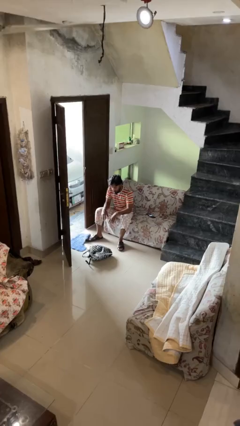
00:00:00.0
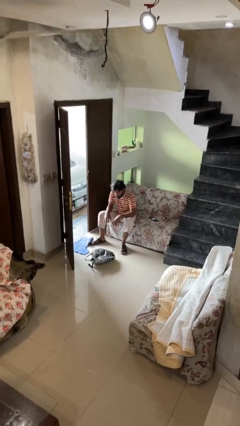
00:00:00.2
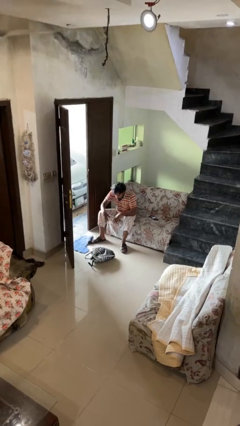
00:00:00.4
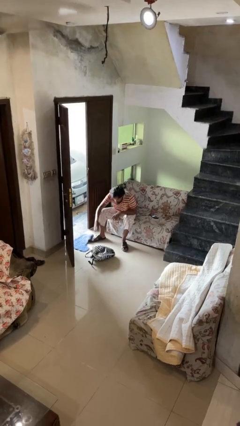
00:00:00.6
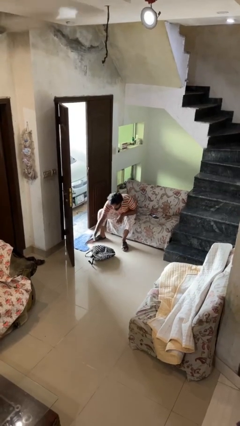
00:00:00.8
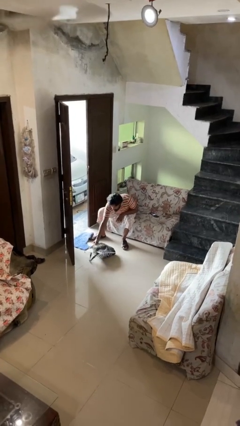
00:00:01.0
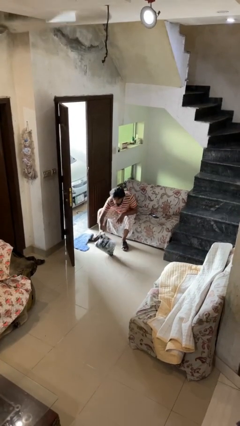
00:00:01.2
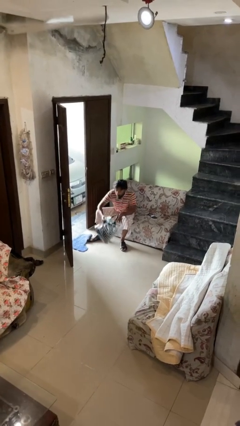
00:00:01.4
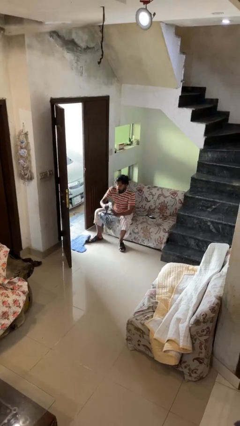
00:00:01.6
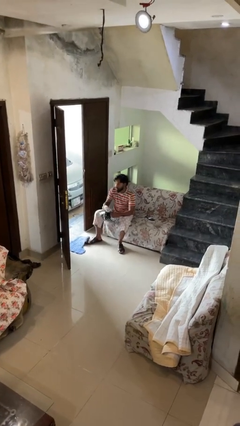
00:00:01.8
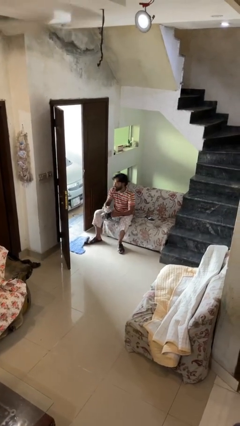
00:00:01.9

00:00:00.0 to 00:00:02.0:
person picks up object from floor

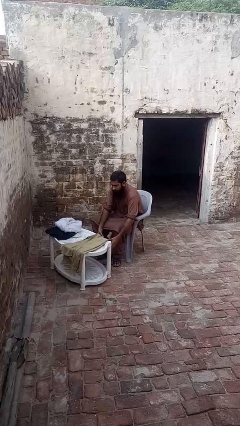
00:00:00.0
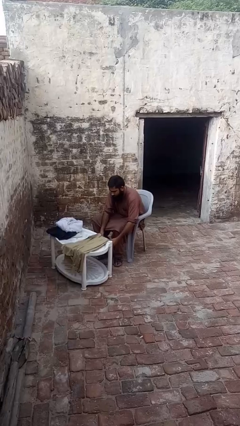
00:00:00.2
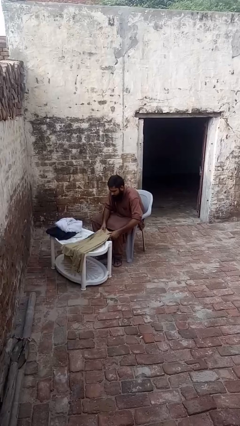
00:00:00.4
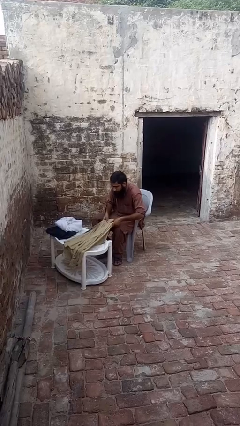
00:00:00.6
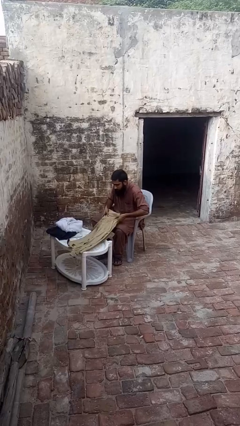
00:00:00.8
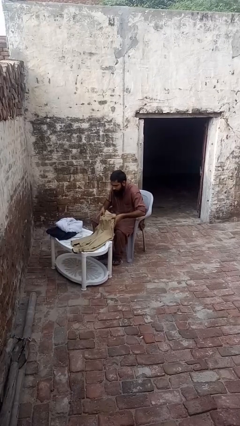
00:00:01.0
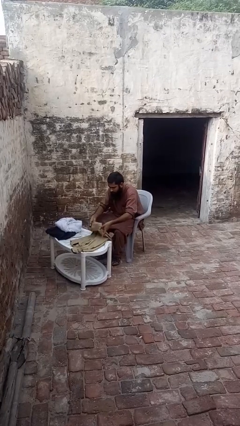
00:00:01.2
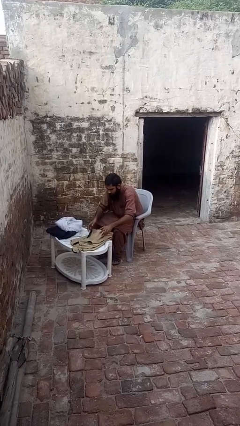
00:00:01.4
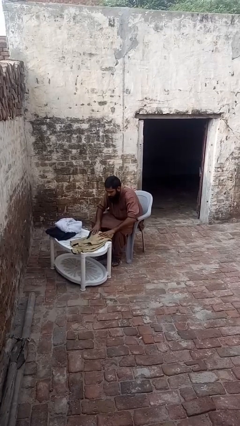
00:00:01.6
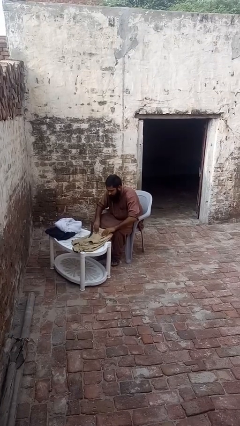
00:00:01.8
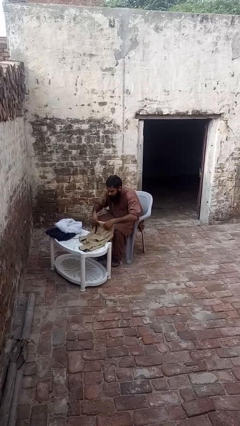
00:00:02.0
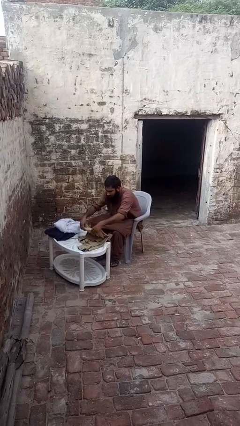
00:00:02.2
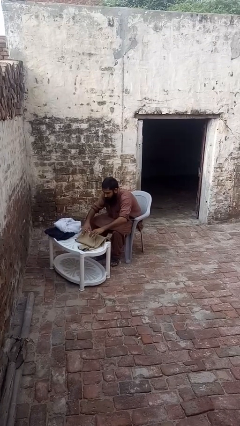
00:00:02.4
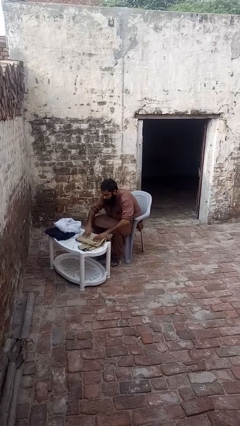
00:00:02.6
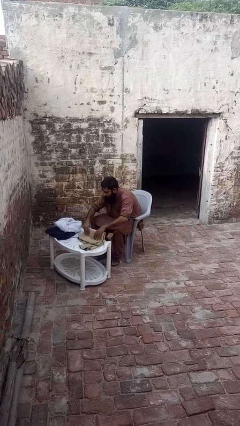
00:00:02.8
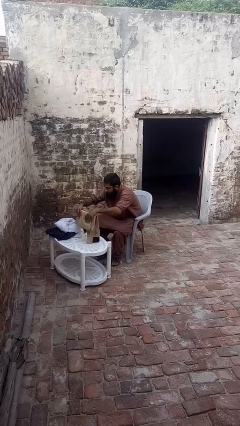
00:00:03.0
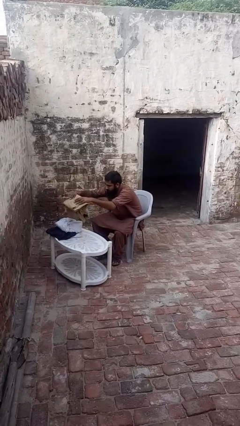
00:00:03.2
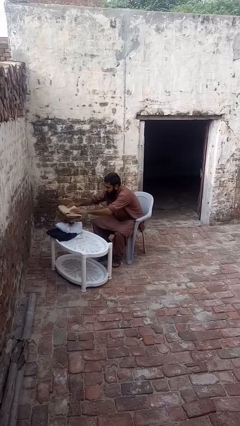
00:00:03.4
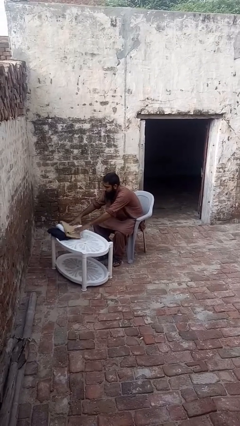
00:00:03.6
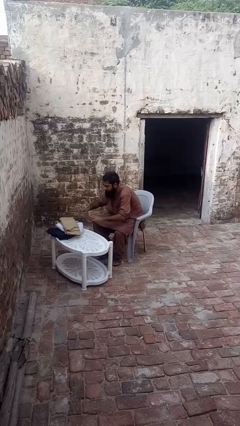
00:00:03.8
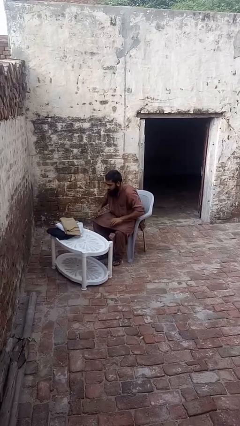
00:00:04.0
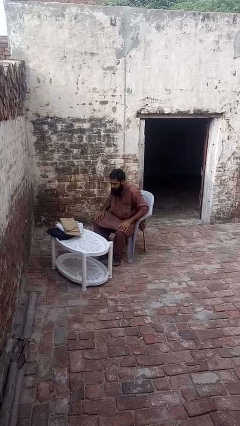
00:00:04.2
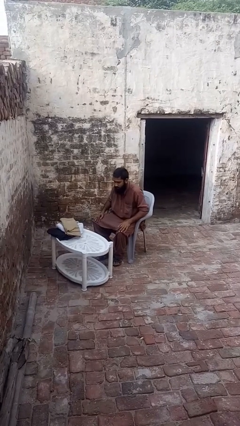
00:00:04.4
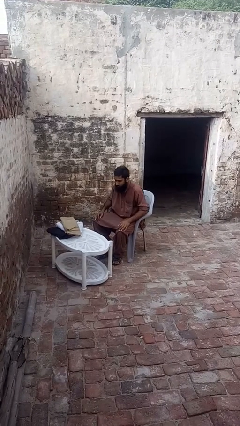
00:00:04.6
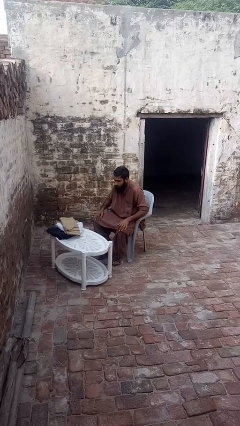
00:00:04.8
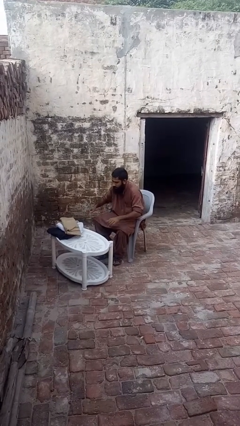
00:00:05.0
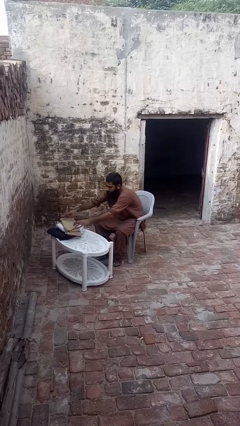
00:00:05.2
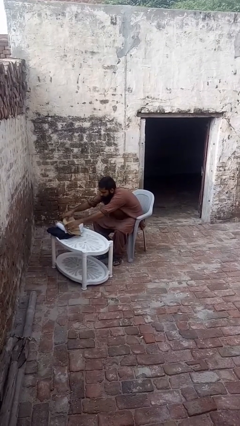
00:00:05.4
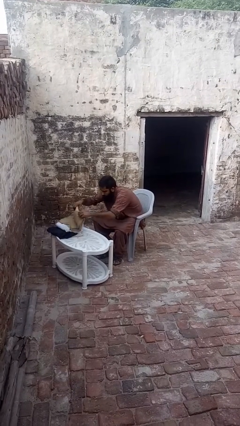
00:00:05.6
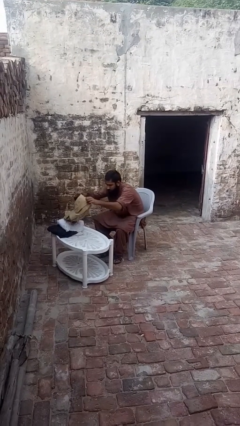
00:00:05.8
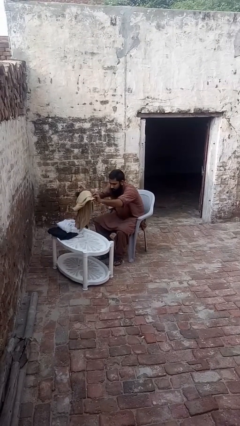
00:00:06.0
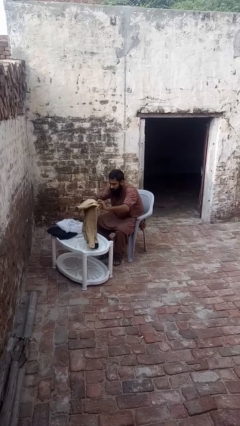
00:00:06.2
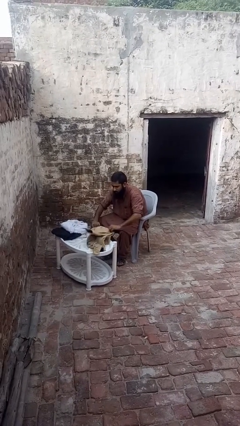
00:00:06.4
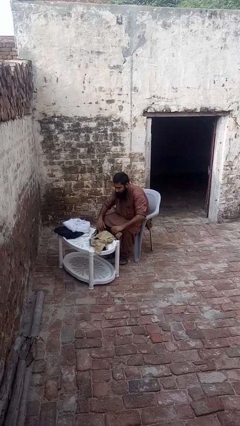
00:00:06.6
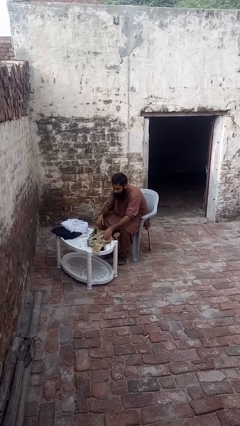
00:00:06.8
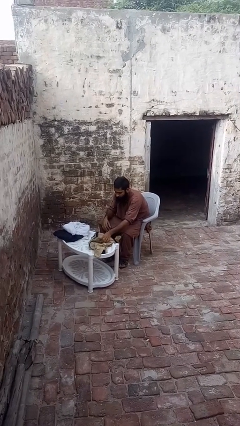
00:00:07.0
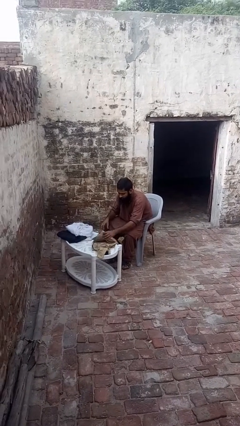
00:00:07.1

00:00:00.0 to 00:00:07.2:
person folds shirt

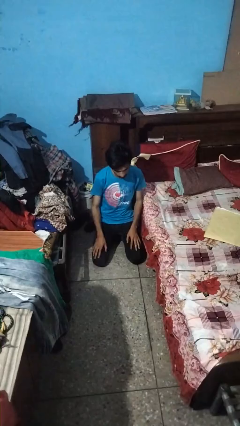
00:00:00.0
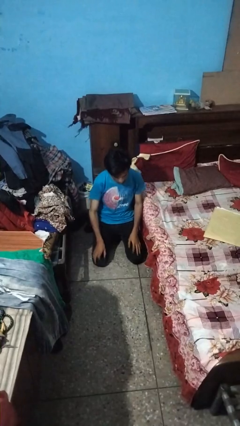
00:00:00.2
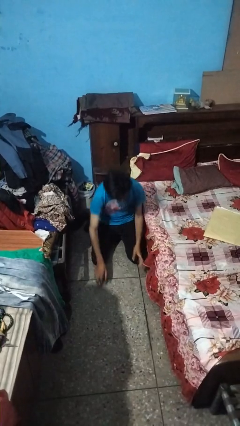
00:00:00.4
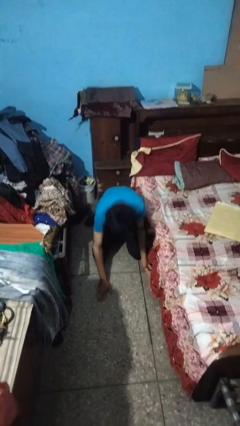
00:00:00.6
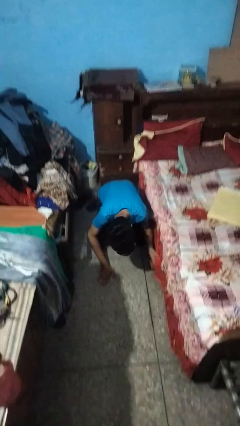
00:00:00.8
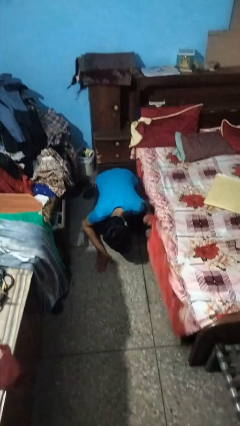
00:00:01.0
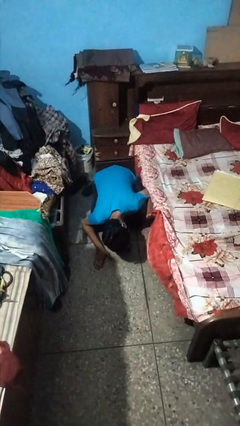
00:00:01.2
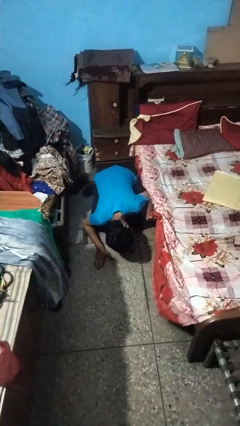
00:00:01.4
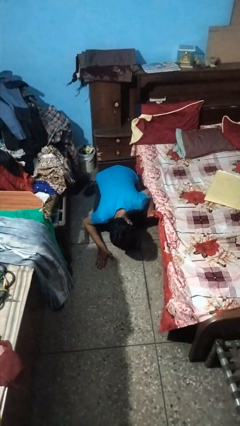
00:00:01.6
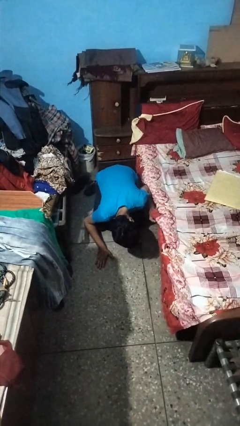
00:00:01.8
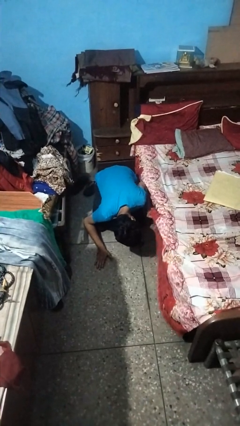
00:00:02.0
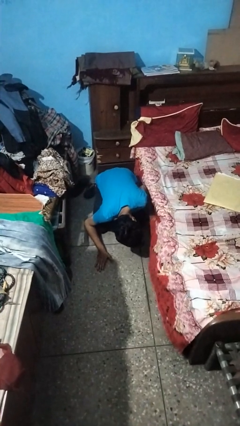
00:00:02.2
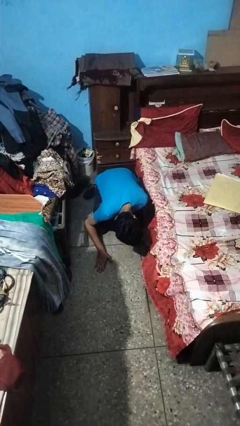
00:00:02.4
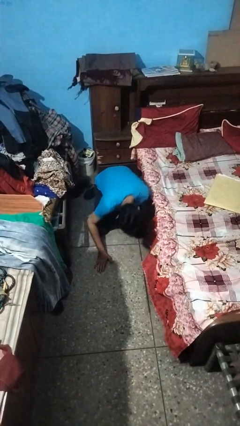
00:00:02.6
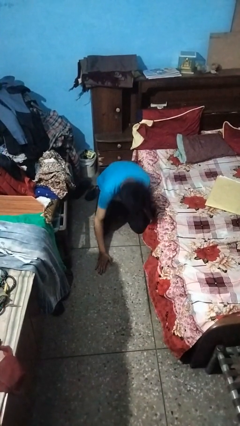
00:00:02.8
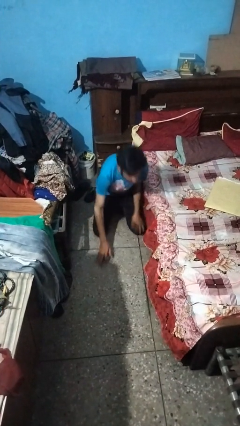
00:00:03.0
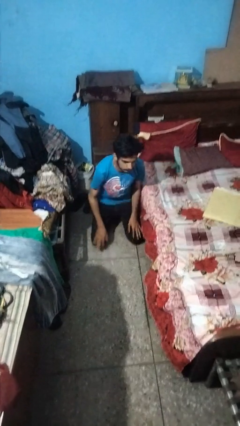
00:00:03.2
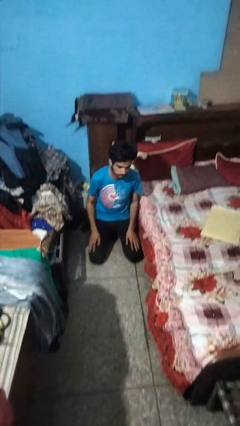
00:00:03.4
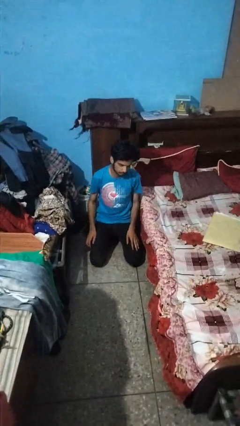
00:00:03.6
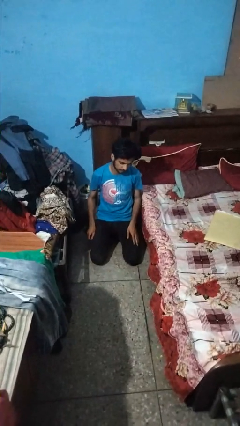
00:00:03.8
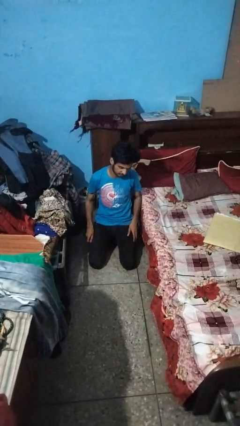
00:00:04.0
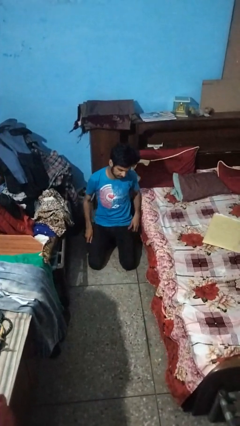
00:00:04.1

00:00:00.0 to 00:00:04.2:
person searches under bed

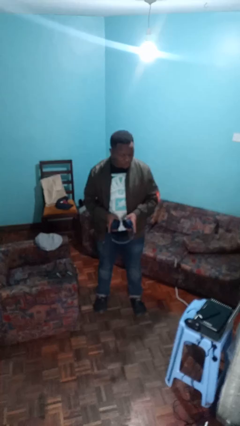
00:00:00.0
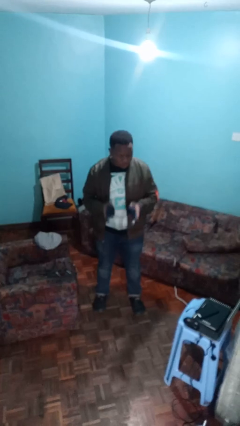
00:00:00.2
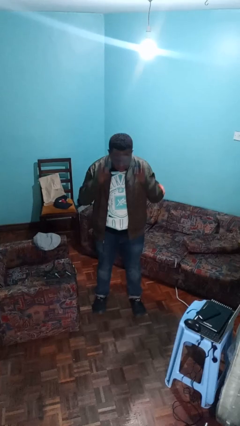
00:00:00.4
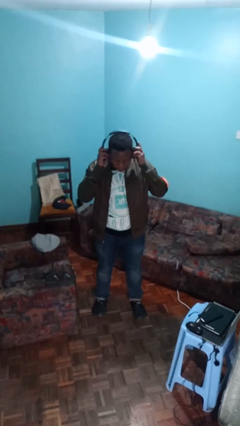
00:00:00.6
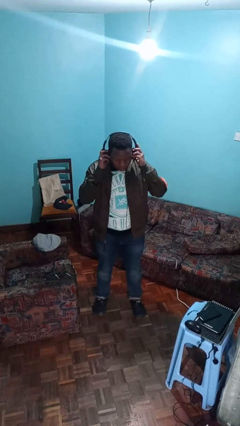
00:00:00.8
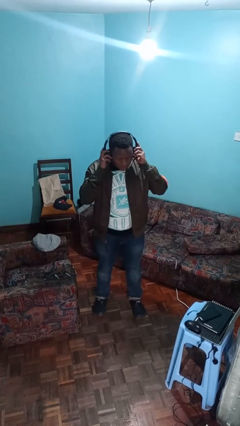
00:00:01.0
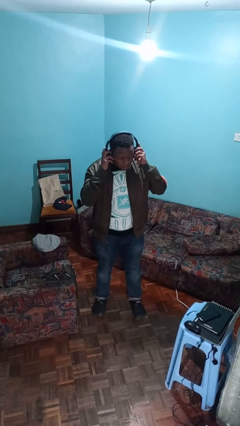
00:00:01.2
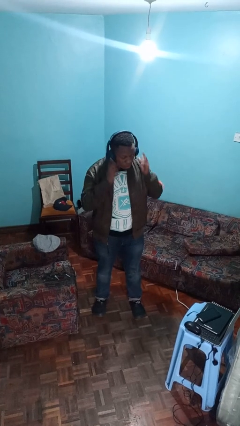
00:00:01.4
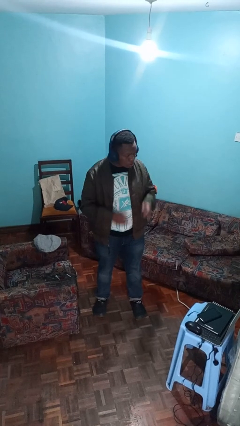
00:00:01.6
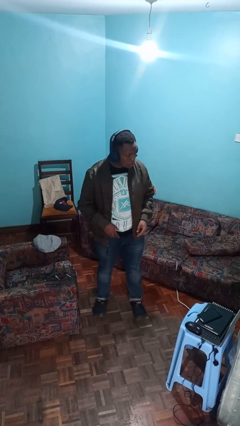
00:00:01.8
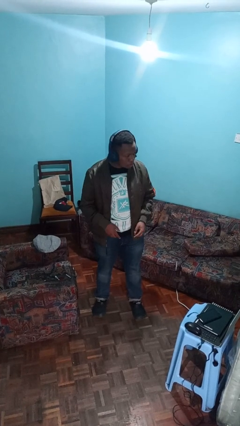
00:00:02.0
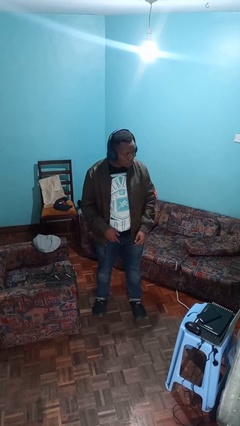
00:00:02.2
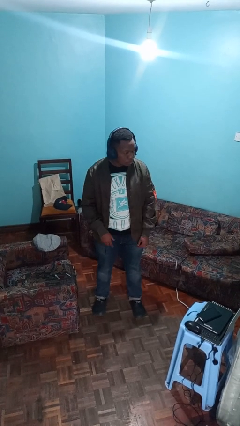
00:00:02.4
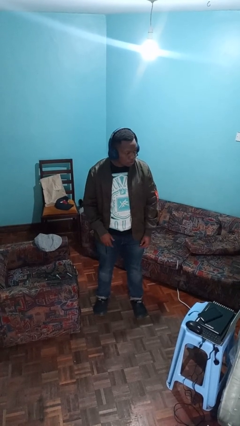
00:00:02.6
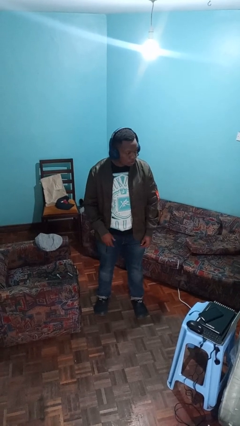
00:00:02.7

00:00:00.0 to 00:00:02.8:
person puts on headphones

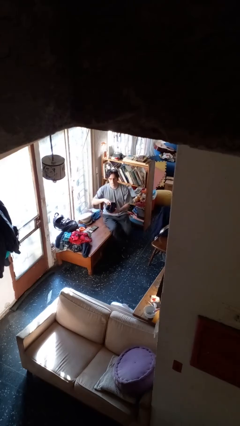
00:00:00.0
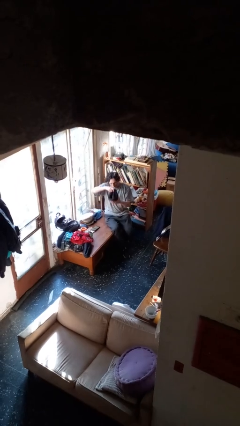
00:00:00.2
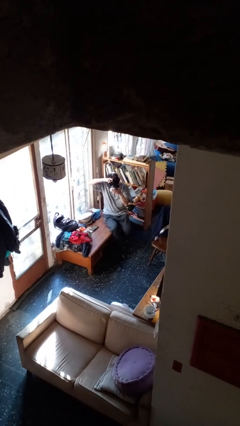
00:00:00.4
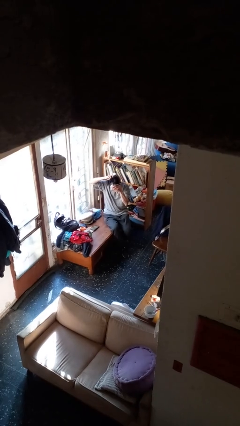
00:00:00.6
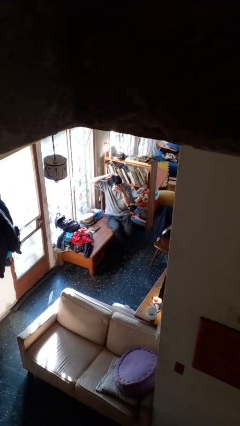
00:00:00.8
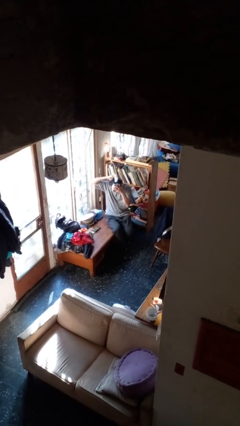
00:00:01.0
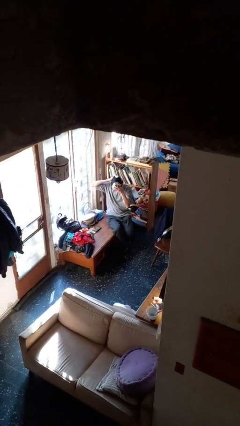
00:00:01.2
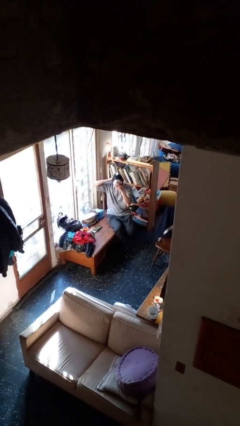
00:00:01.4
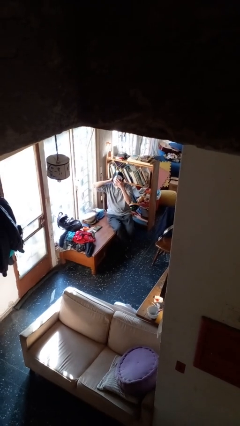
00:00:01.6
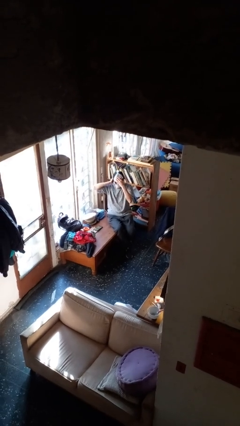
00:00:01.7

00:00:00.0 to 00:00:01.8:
person puts on facemask
